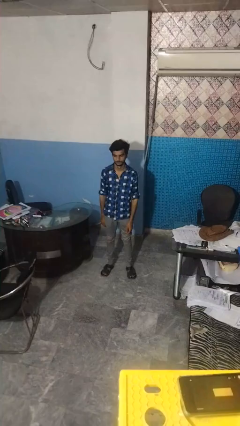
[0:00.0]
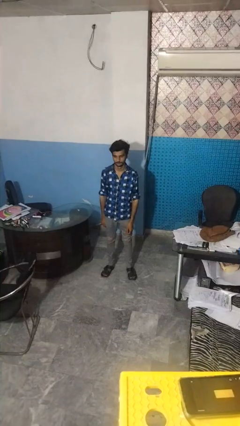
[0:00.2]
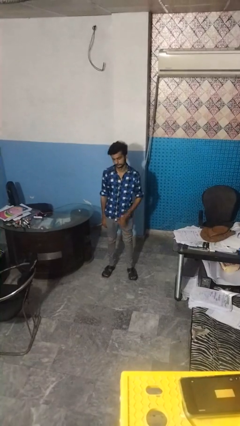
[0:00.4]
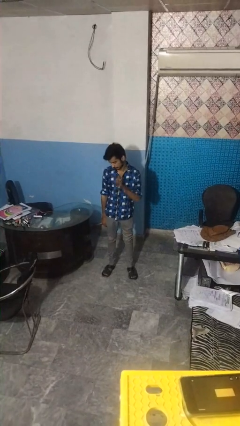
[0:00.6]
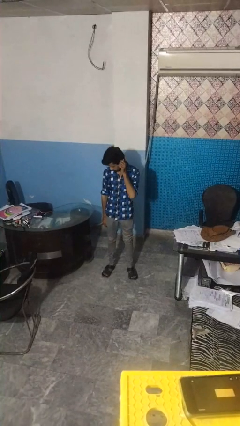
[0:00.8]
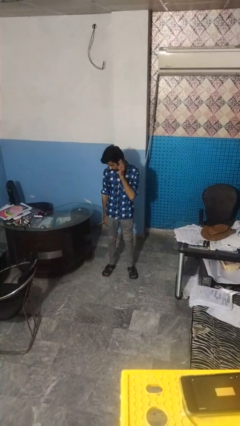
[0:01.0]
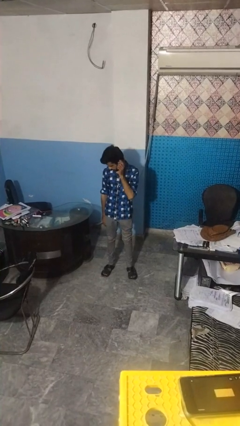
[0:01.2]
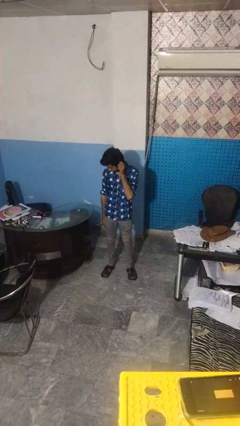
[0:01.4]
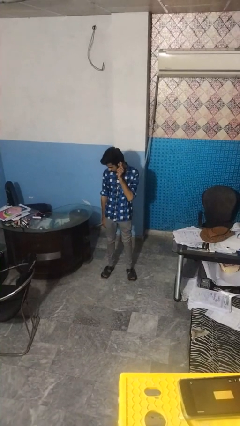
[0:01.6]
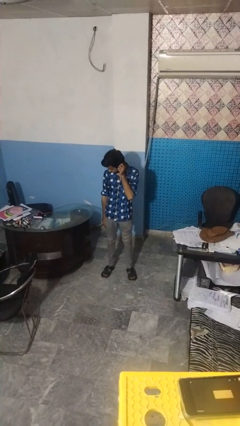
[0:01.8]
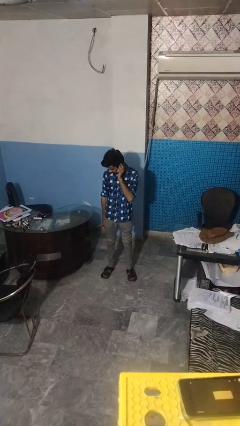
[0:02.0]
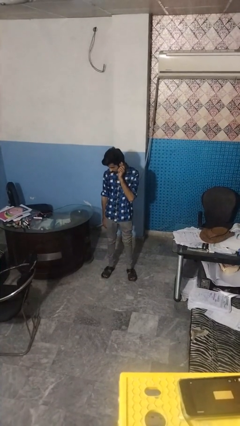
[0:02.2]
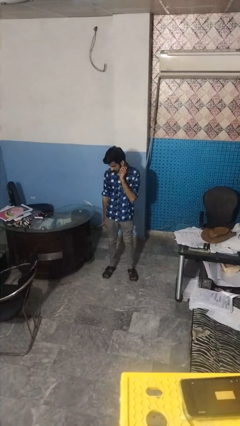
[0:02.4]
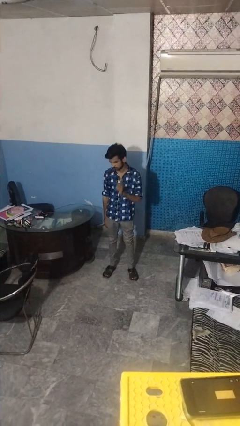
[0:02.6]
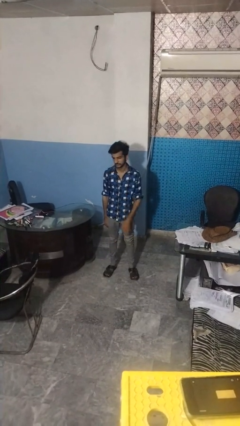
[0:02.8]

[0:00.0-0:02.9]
person touches earlobe

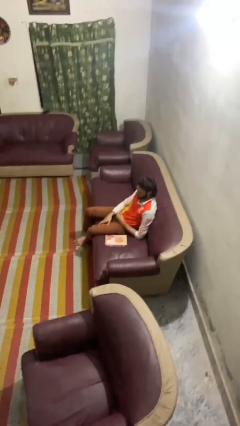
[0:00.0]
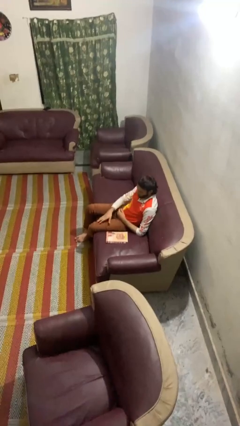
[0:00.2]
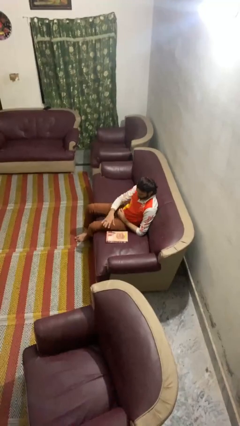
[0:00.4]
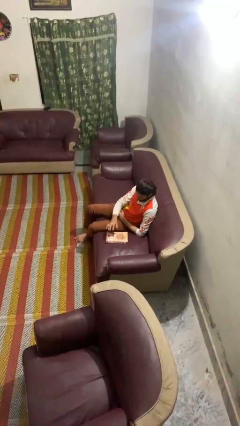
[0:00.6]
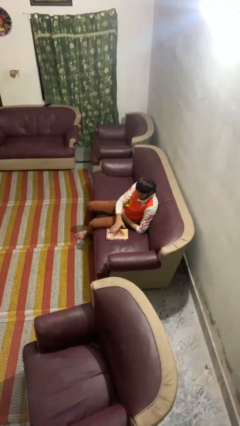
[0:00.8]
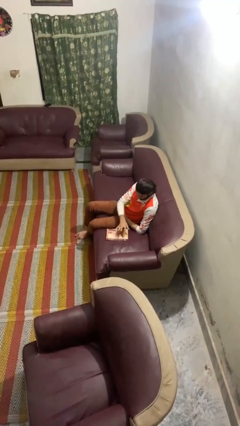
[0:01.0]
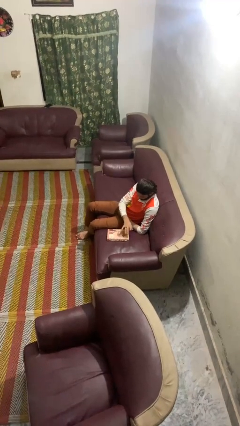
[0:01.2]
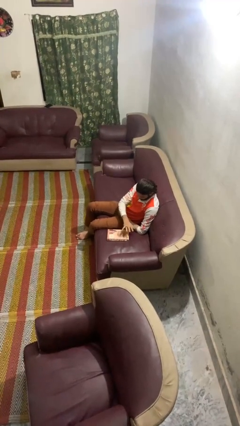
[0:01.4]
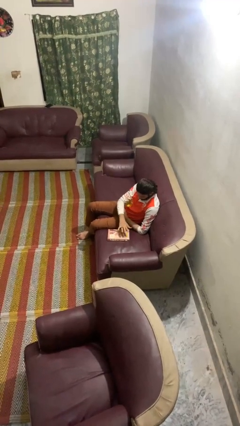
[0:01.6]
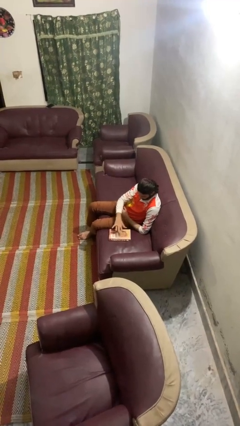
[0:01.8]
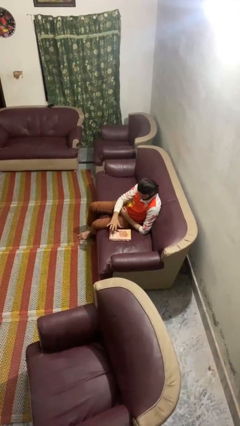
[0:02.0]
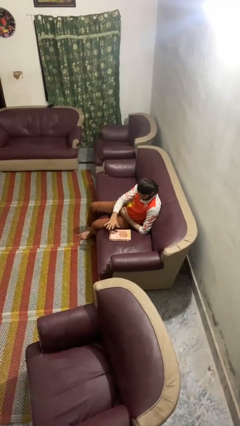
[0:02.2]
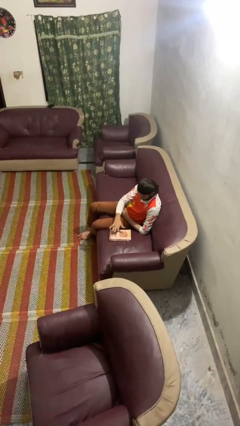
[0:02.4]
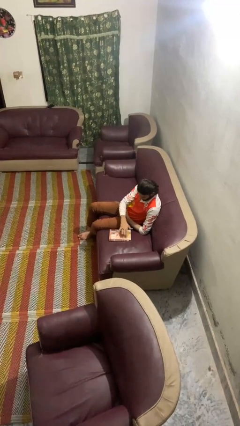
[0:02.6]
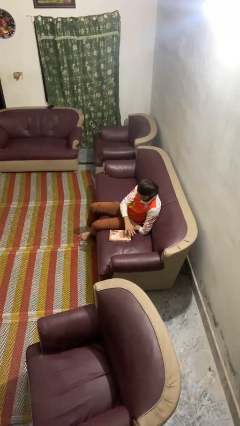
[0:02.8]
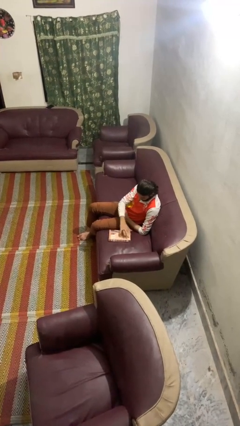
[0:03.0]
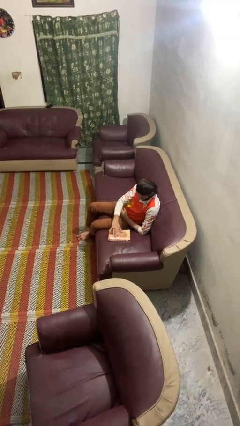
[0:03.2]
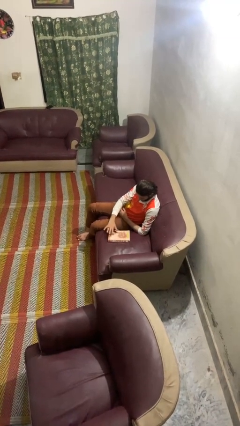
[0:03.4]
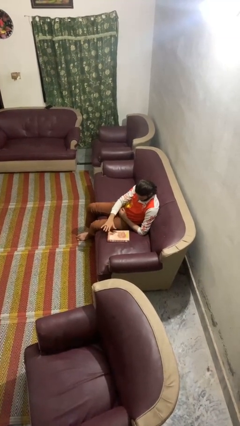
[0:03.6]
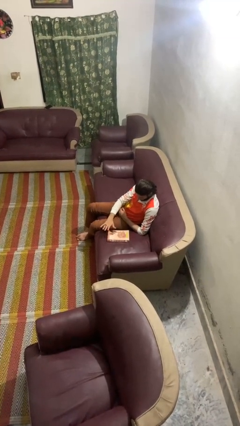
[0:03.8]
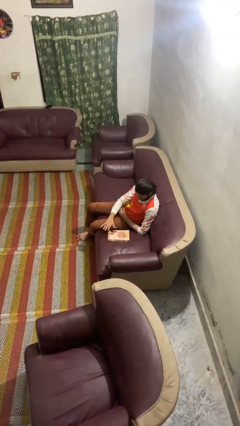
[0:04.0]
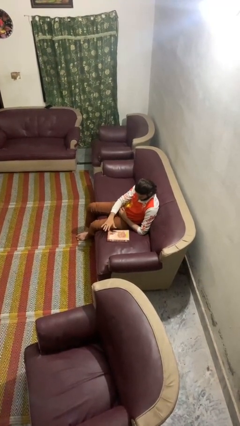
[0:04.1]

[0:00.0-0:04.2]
person waves hand over object

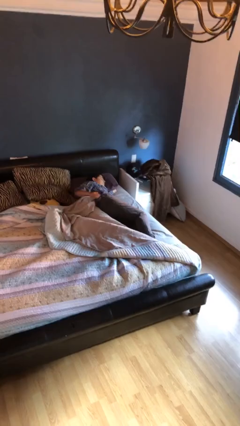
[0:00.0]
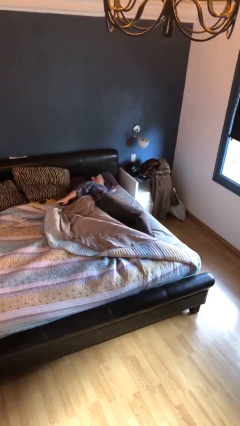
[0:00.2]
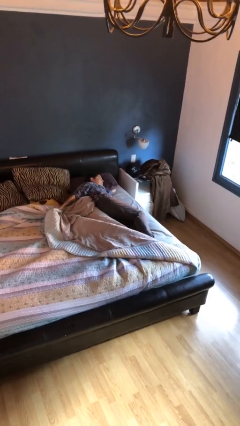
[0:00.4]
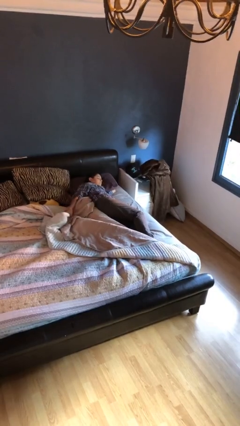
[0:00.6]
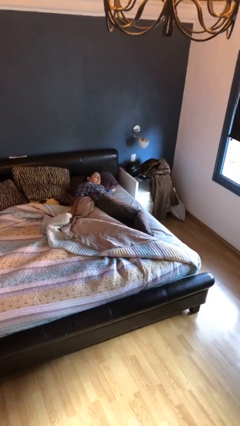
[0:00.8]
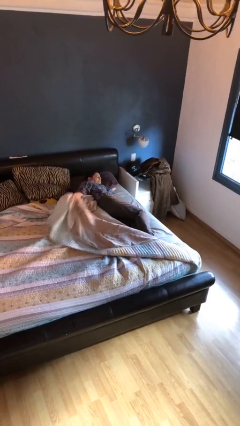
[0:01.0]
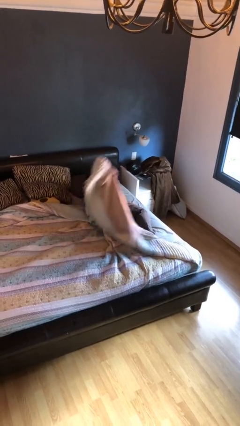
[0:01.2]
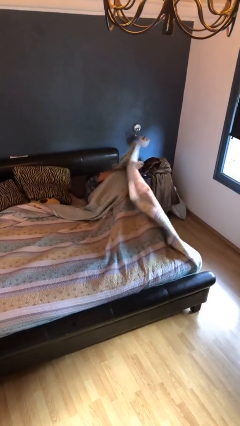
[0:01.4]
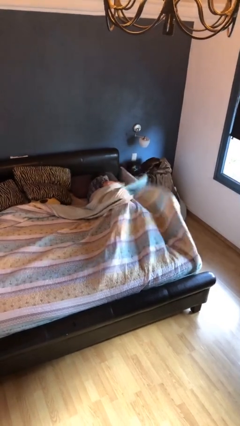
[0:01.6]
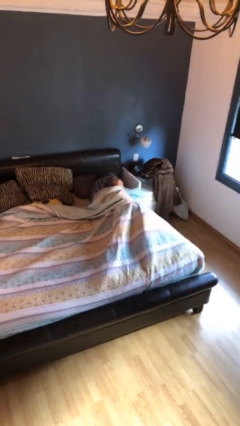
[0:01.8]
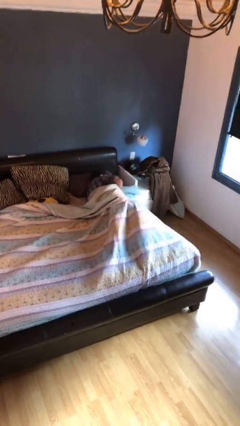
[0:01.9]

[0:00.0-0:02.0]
person covers with bedsheets

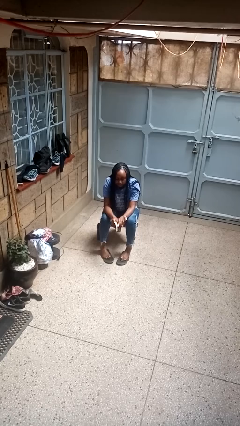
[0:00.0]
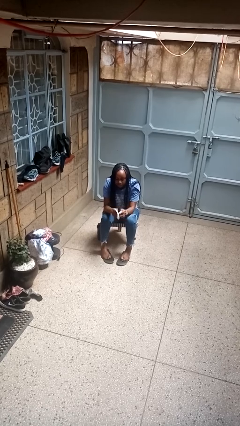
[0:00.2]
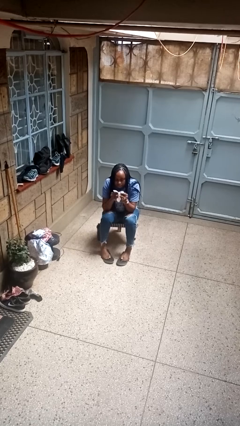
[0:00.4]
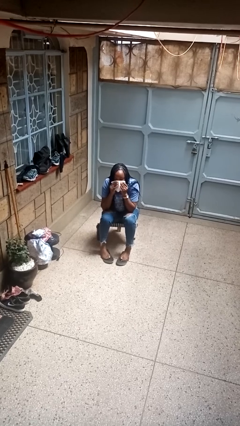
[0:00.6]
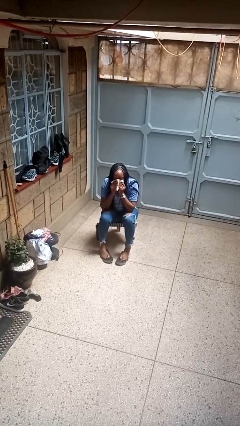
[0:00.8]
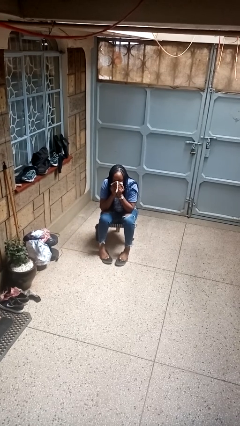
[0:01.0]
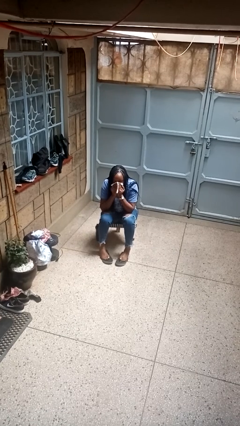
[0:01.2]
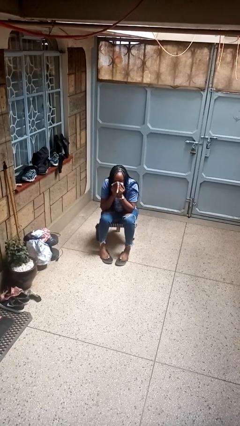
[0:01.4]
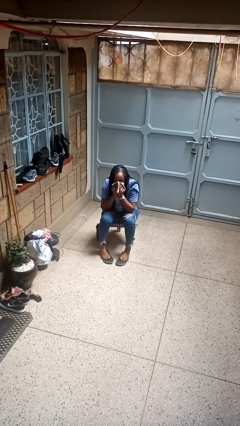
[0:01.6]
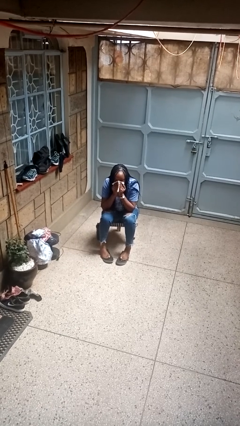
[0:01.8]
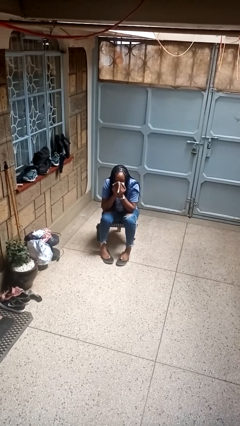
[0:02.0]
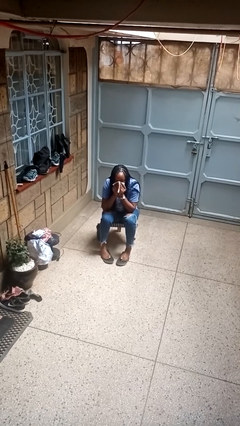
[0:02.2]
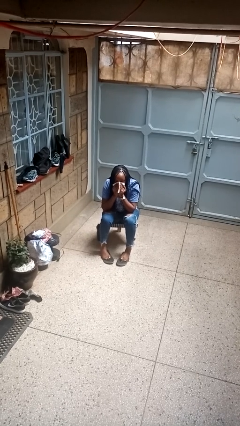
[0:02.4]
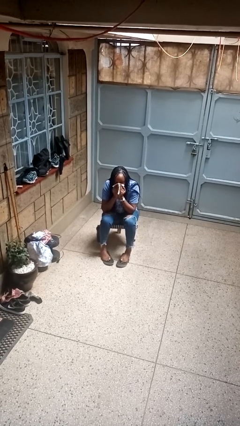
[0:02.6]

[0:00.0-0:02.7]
person blows nose

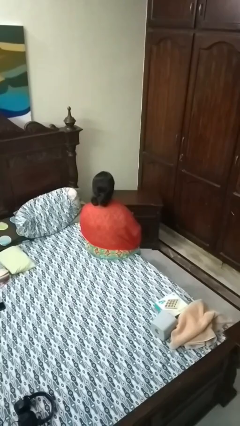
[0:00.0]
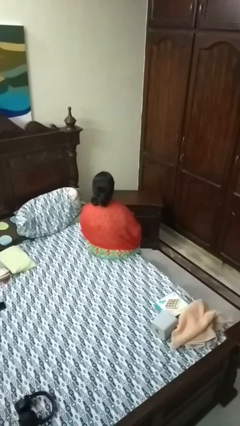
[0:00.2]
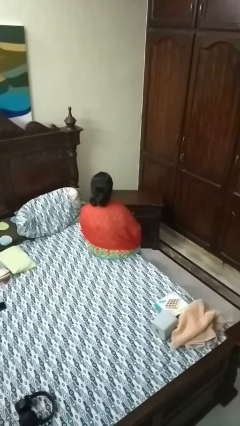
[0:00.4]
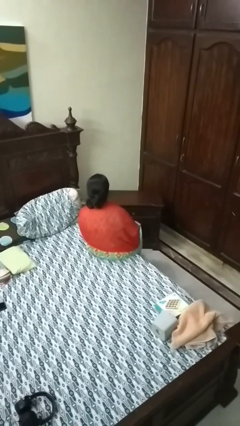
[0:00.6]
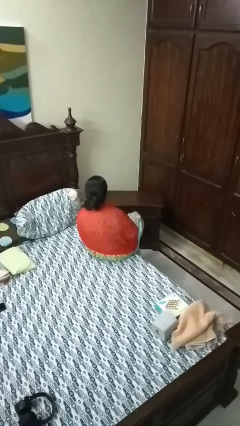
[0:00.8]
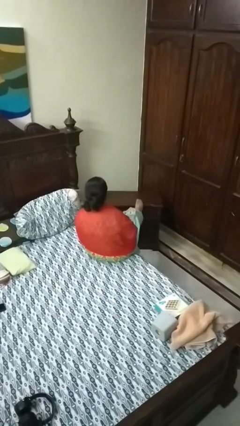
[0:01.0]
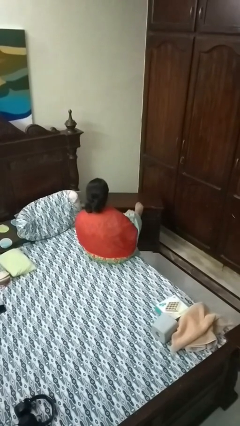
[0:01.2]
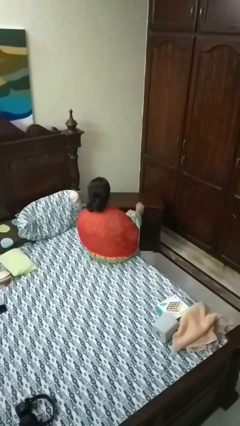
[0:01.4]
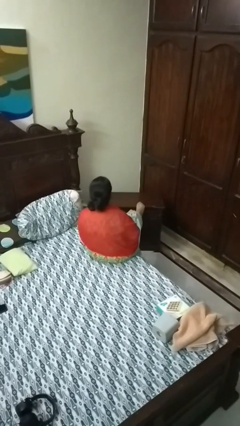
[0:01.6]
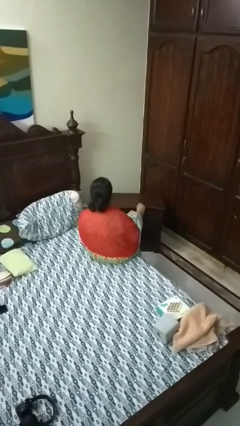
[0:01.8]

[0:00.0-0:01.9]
person puts feet up

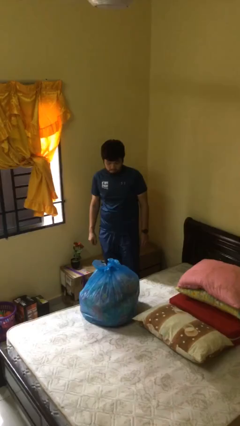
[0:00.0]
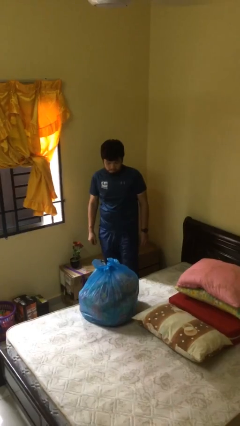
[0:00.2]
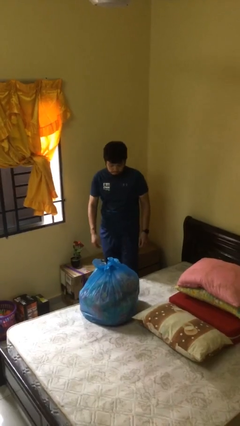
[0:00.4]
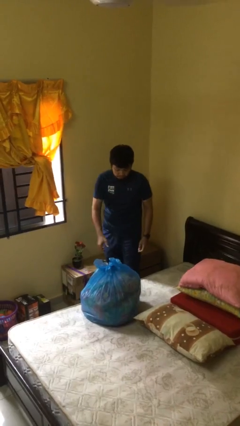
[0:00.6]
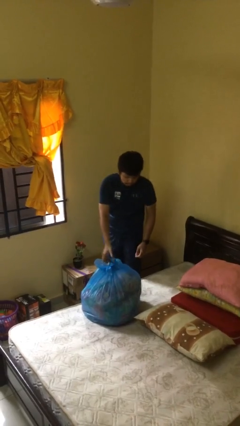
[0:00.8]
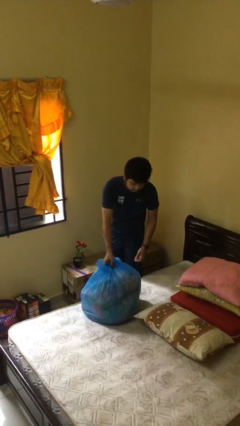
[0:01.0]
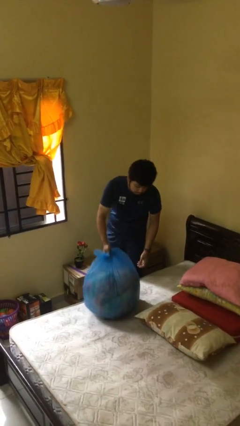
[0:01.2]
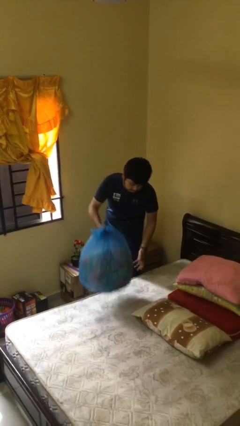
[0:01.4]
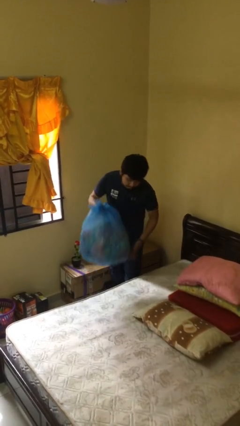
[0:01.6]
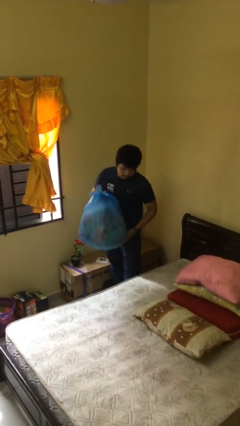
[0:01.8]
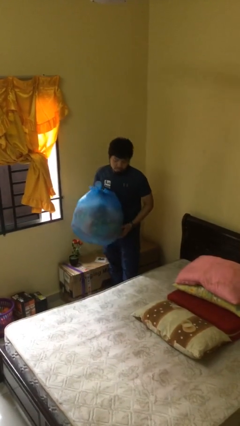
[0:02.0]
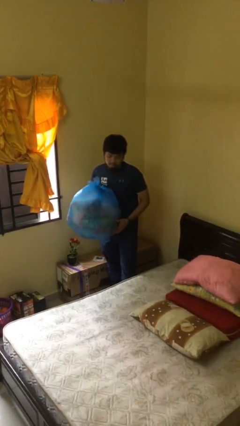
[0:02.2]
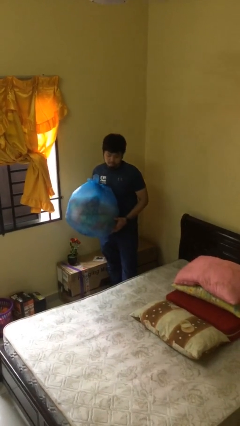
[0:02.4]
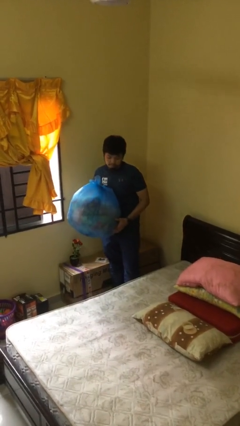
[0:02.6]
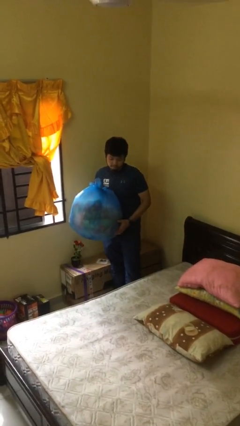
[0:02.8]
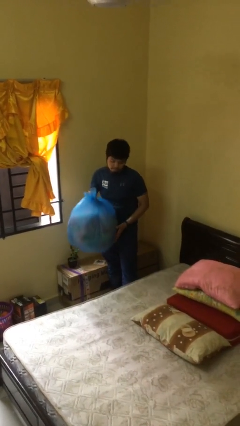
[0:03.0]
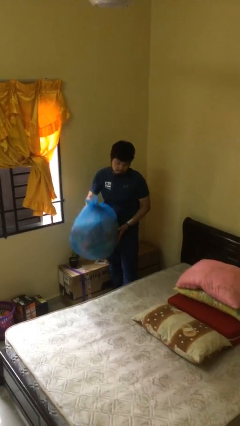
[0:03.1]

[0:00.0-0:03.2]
person picks up object from bed

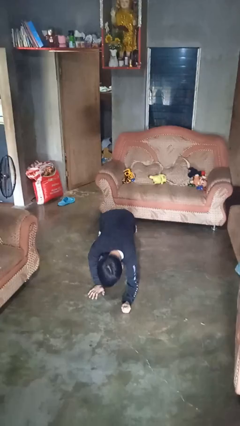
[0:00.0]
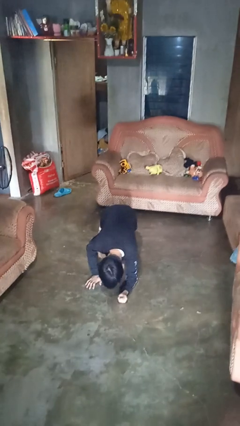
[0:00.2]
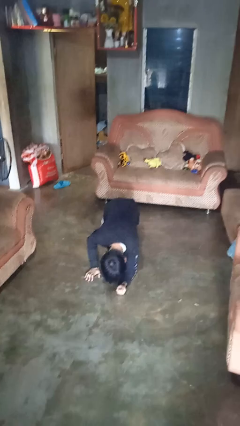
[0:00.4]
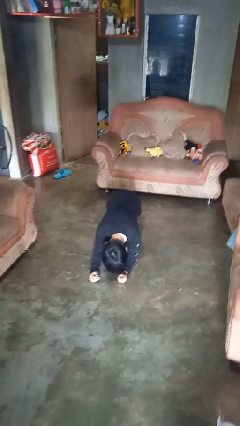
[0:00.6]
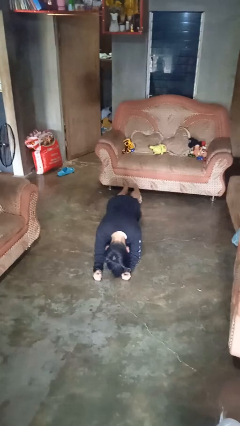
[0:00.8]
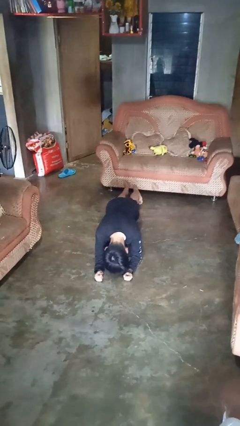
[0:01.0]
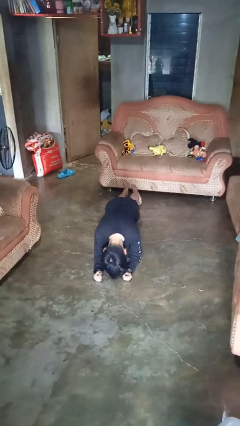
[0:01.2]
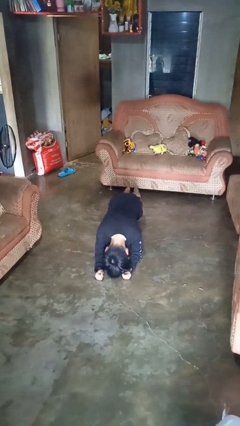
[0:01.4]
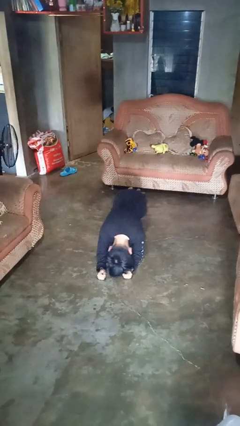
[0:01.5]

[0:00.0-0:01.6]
person exercises with plank
